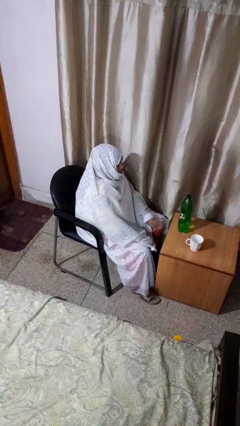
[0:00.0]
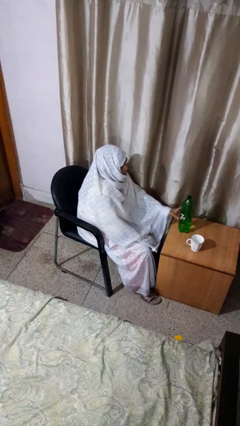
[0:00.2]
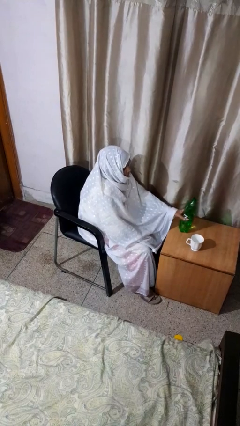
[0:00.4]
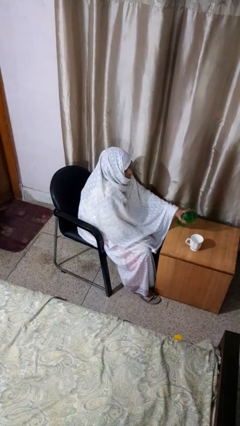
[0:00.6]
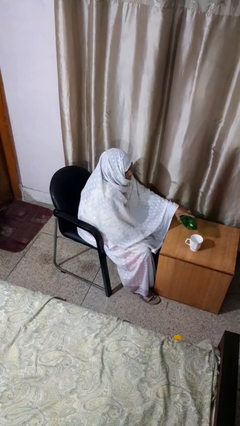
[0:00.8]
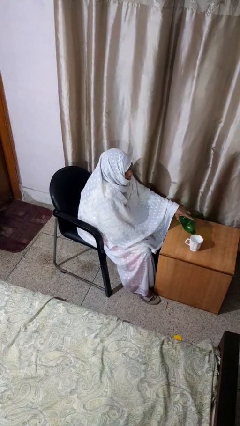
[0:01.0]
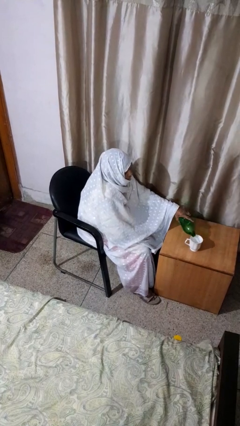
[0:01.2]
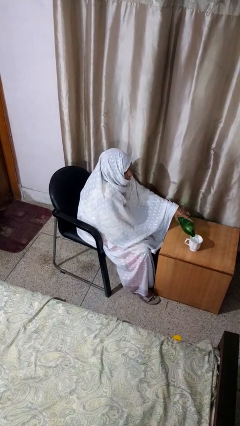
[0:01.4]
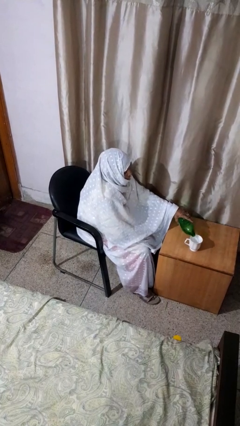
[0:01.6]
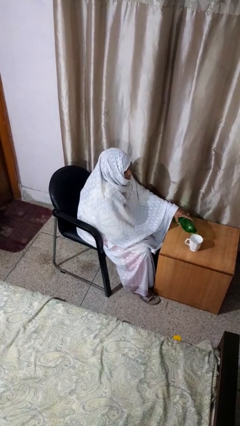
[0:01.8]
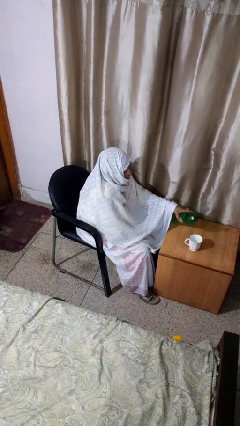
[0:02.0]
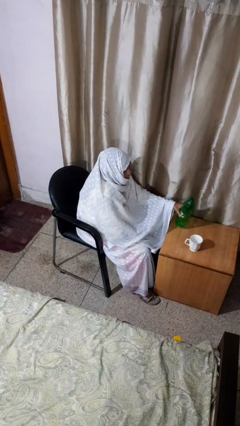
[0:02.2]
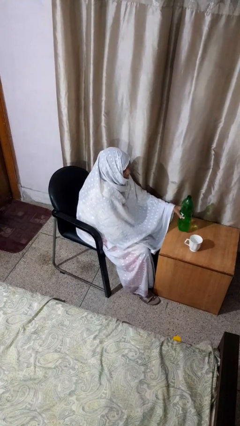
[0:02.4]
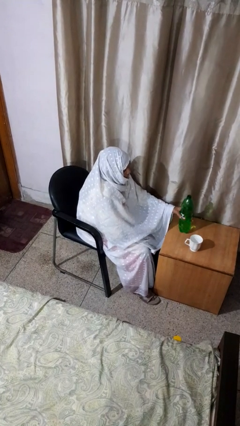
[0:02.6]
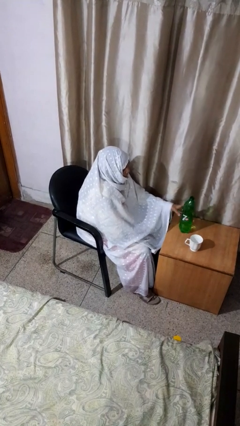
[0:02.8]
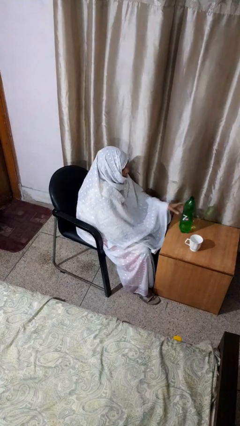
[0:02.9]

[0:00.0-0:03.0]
person pours liquid into cup

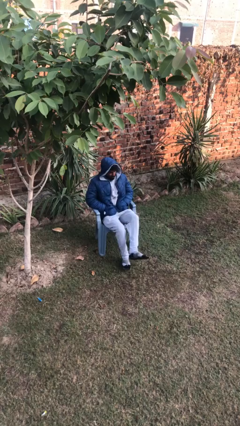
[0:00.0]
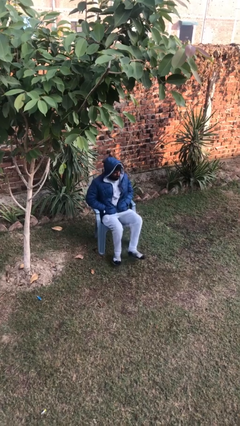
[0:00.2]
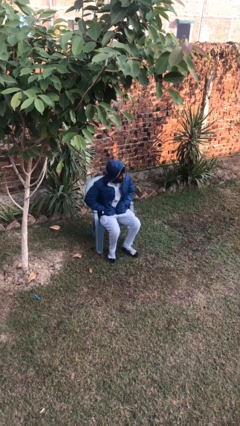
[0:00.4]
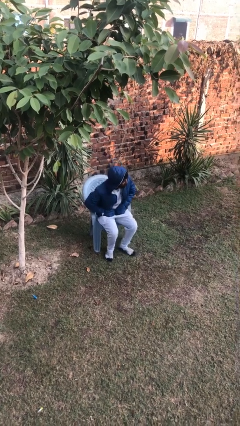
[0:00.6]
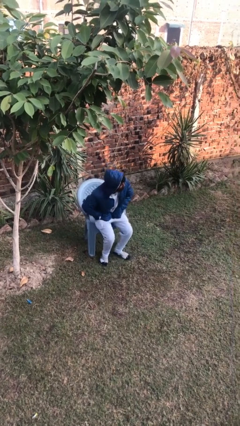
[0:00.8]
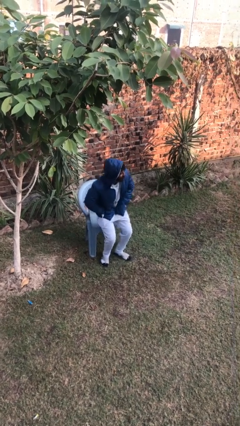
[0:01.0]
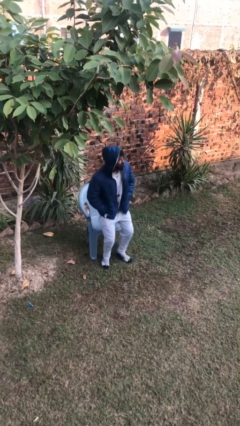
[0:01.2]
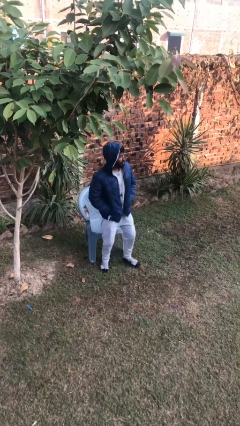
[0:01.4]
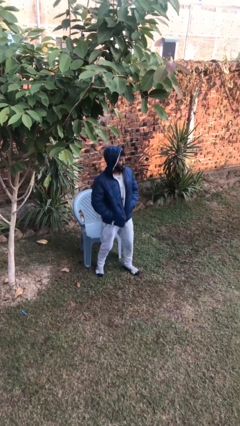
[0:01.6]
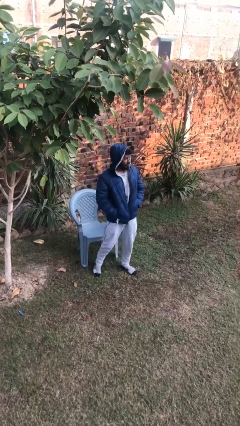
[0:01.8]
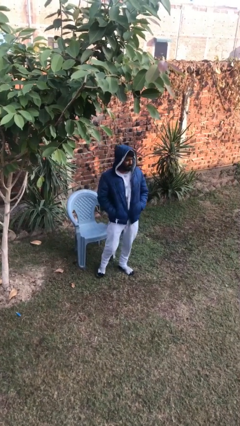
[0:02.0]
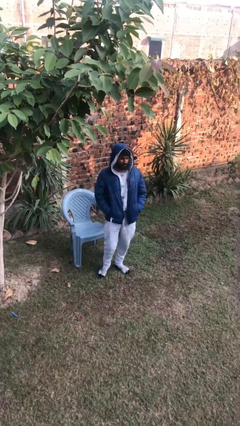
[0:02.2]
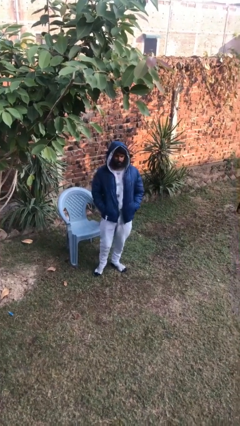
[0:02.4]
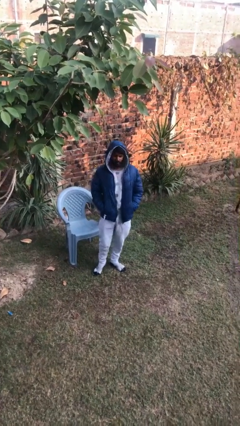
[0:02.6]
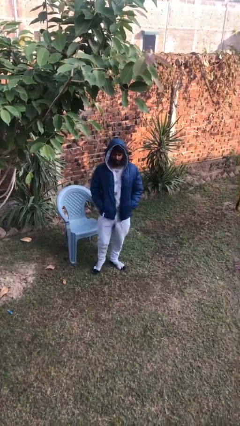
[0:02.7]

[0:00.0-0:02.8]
person stands up

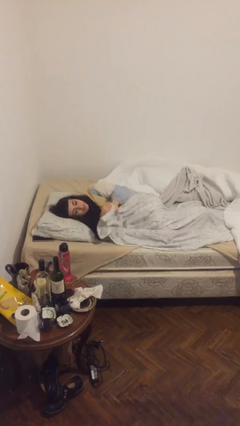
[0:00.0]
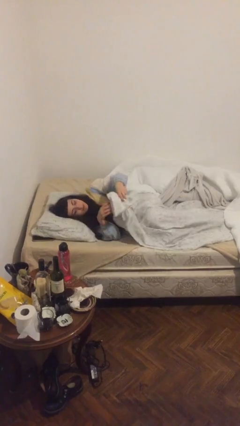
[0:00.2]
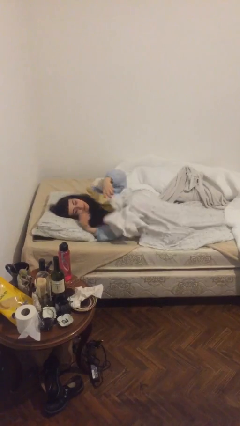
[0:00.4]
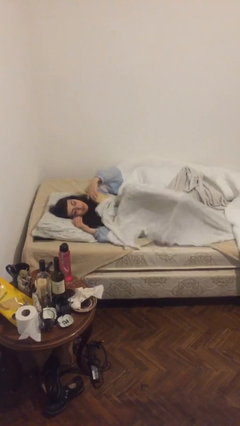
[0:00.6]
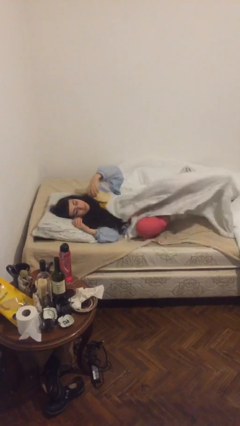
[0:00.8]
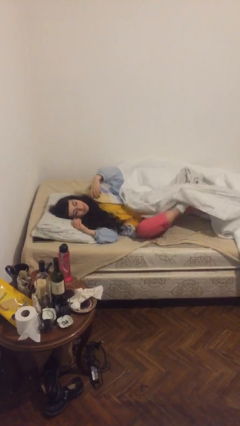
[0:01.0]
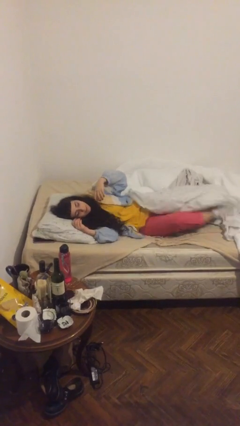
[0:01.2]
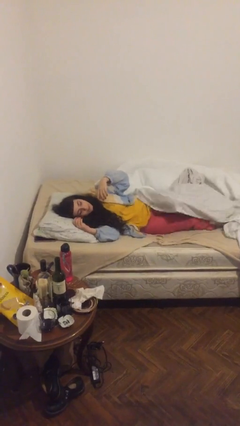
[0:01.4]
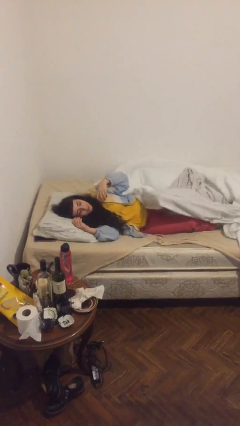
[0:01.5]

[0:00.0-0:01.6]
person uncovers with bedsheets

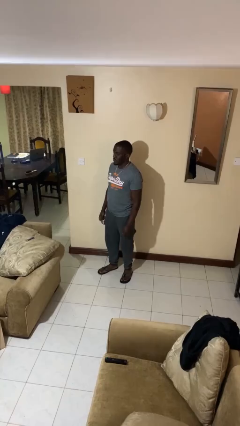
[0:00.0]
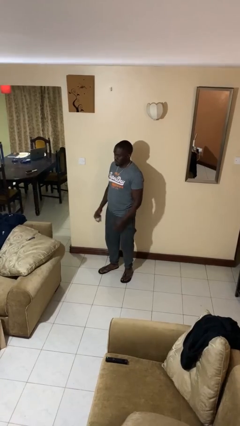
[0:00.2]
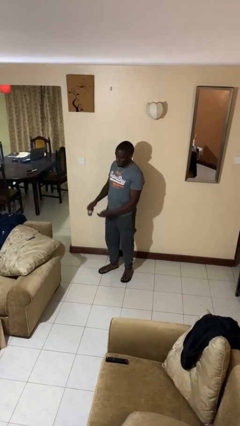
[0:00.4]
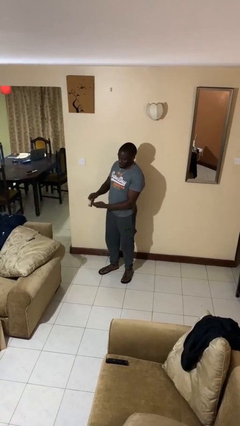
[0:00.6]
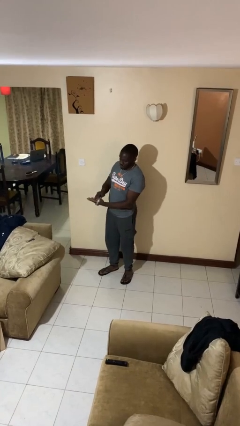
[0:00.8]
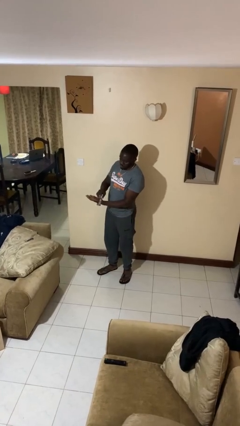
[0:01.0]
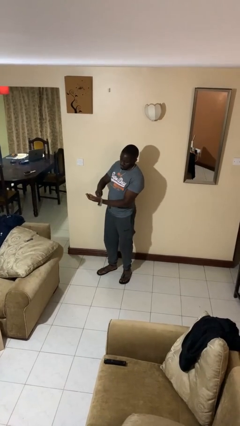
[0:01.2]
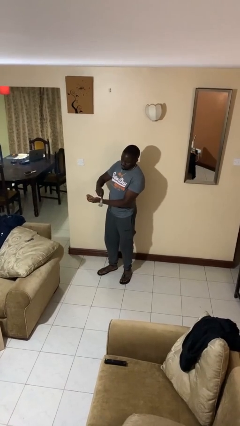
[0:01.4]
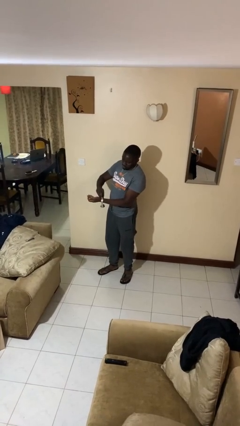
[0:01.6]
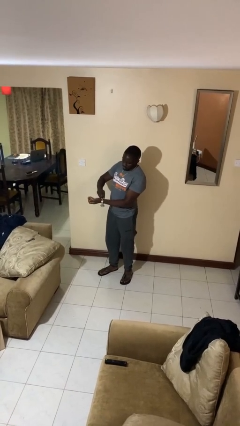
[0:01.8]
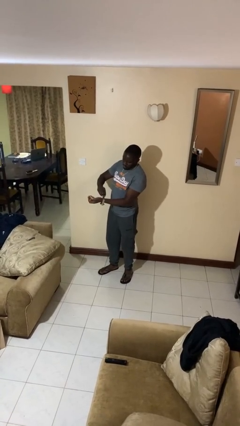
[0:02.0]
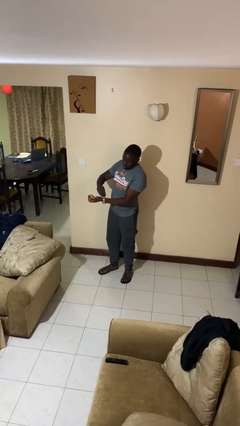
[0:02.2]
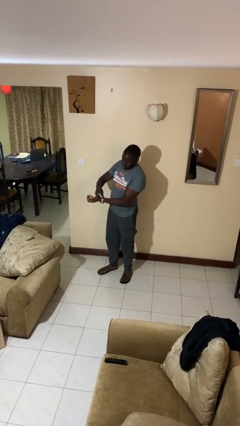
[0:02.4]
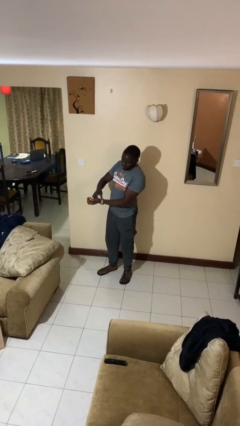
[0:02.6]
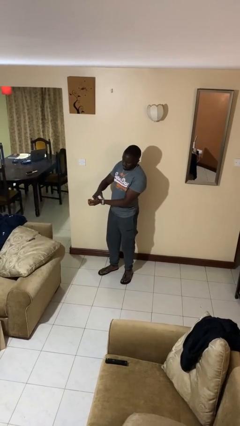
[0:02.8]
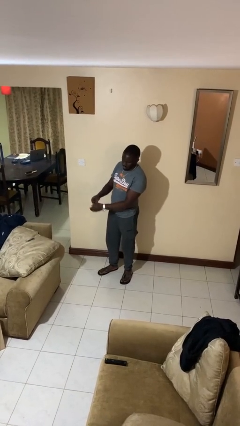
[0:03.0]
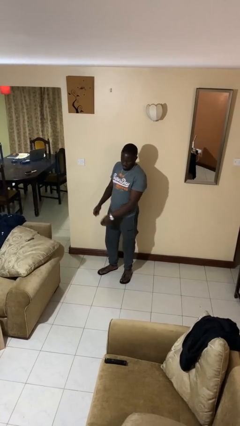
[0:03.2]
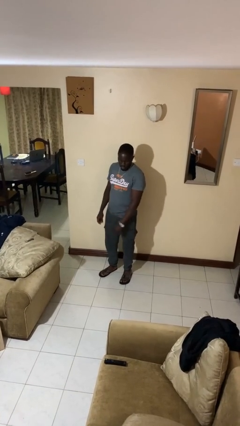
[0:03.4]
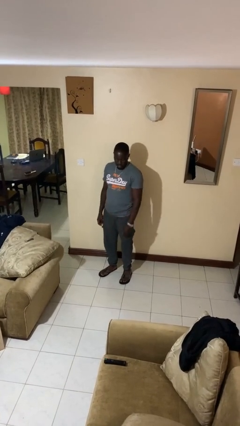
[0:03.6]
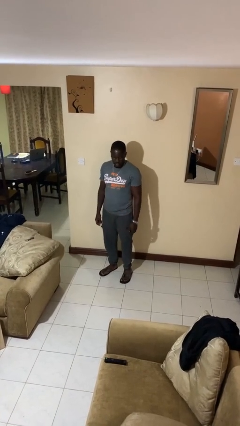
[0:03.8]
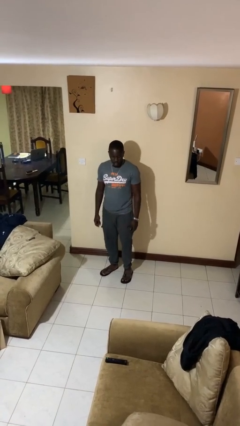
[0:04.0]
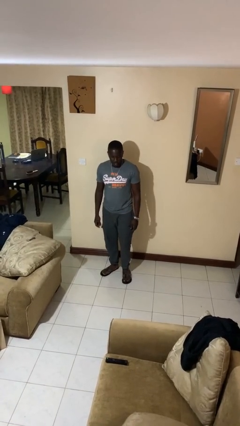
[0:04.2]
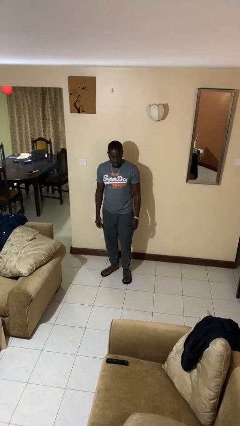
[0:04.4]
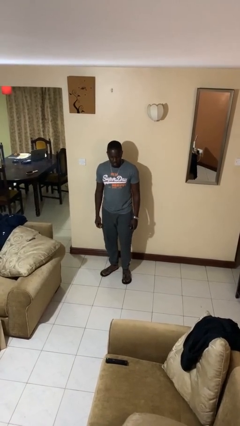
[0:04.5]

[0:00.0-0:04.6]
person puts on wristwatch

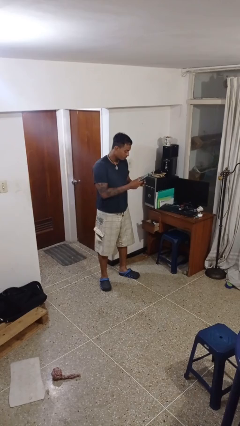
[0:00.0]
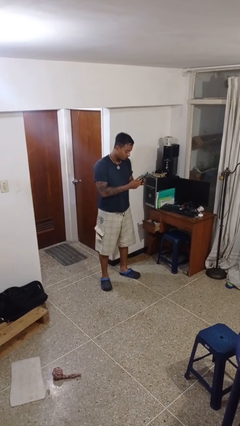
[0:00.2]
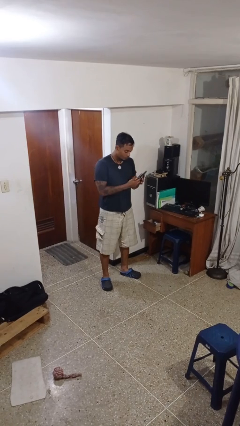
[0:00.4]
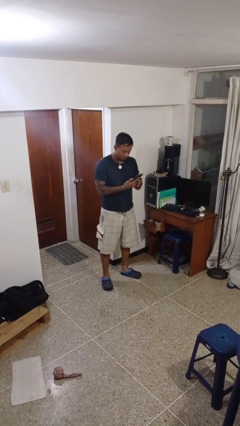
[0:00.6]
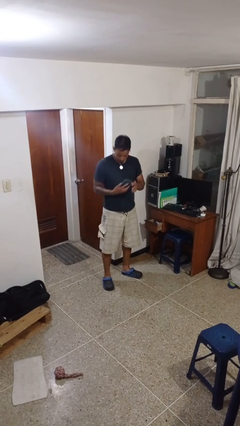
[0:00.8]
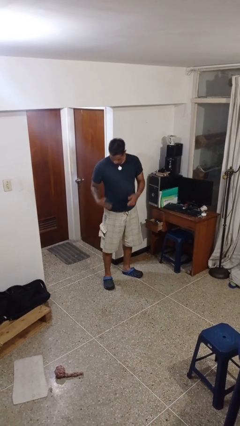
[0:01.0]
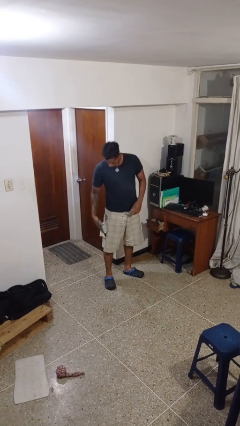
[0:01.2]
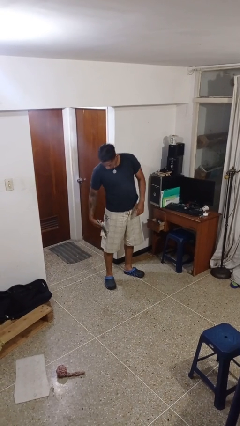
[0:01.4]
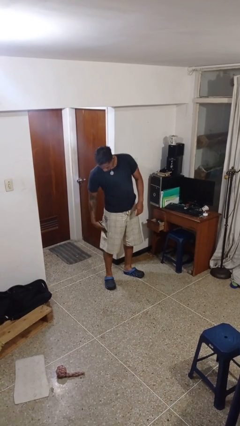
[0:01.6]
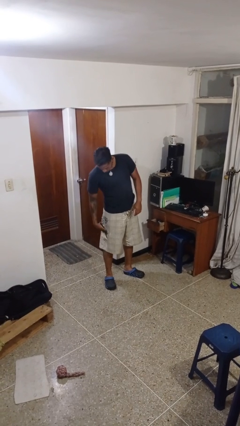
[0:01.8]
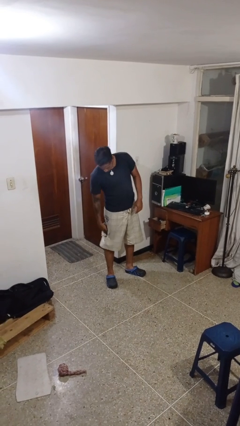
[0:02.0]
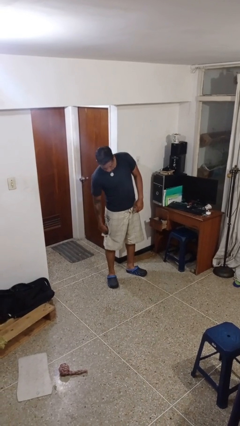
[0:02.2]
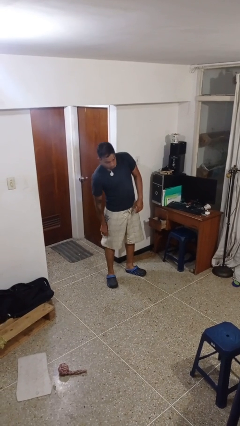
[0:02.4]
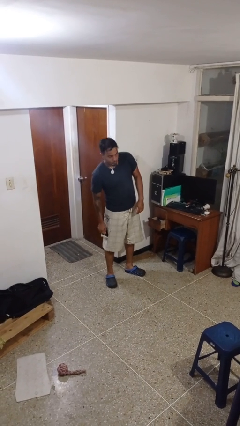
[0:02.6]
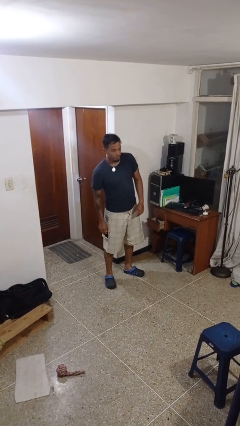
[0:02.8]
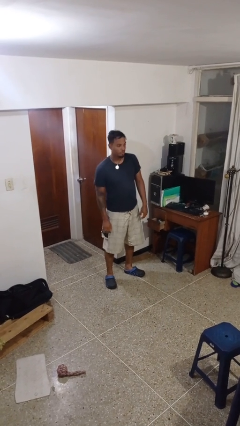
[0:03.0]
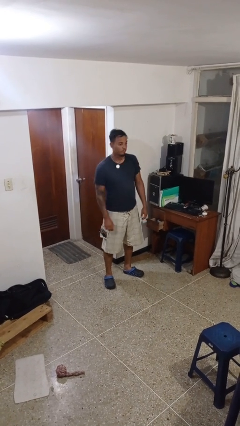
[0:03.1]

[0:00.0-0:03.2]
person puts phone into pocket

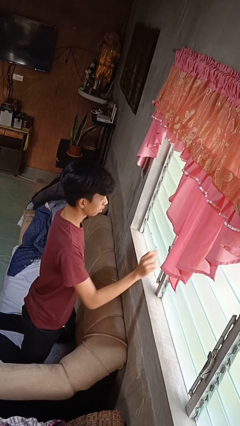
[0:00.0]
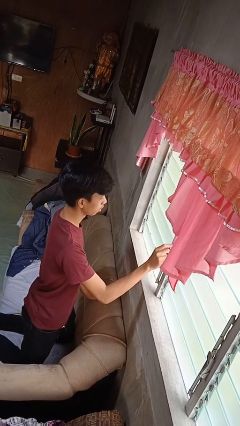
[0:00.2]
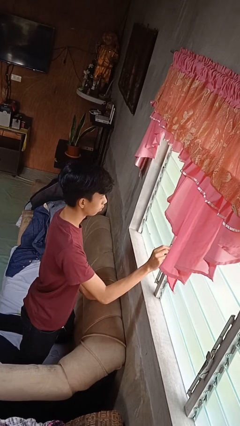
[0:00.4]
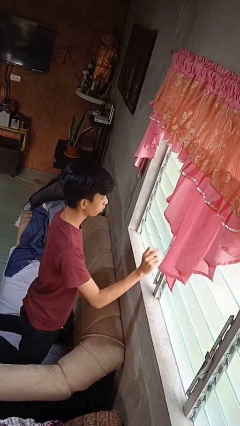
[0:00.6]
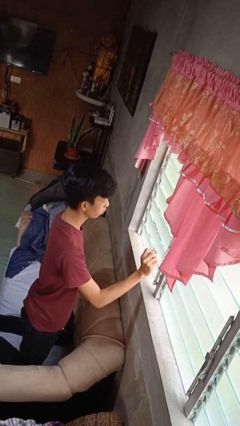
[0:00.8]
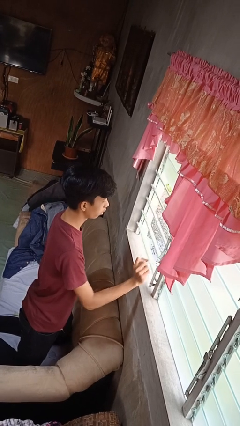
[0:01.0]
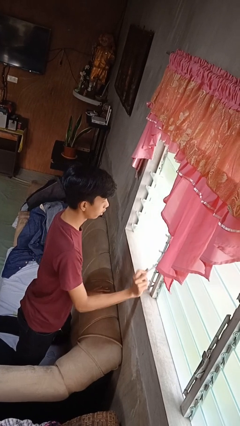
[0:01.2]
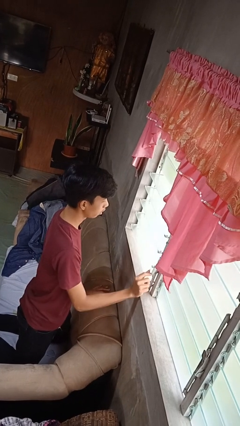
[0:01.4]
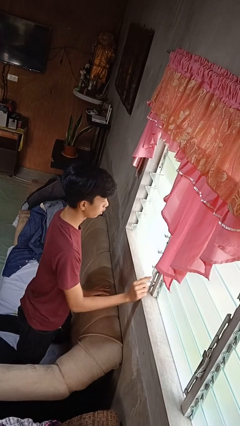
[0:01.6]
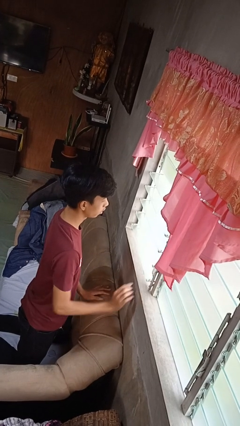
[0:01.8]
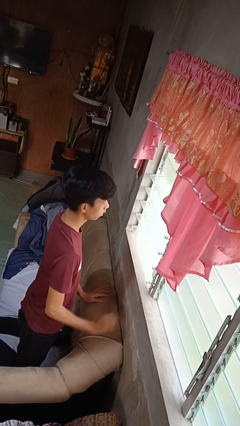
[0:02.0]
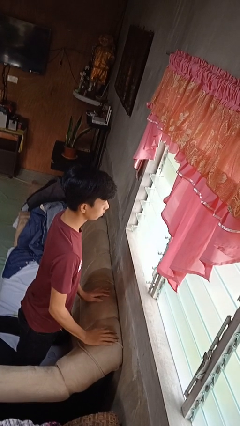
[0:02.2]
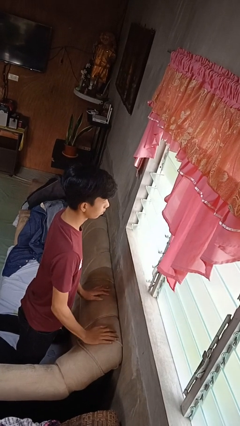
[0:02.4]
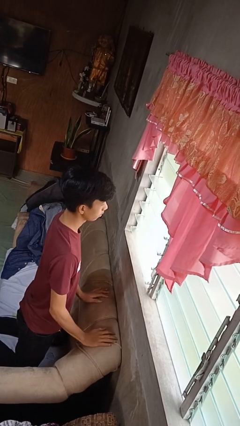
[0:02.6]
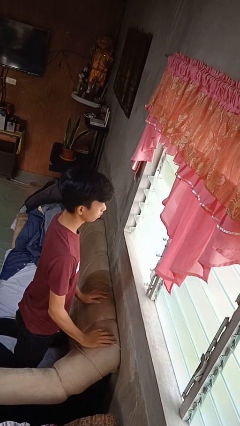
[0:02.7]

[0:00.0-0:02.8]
person opens home window
